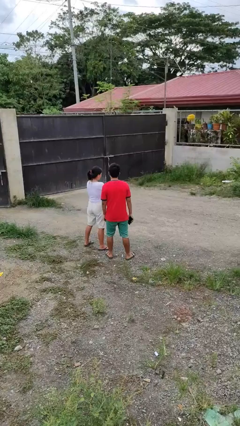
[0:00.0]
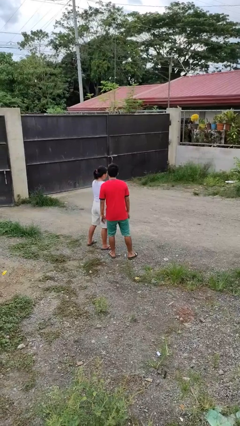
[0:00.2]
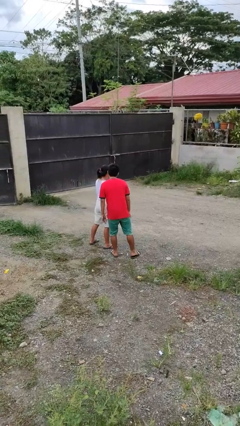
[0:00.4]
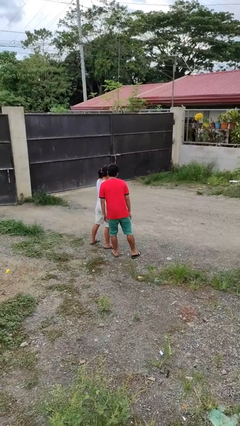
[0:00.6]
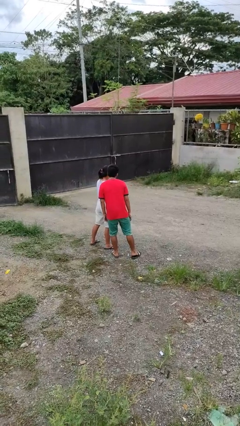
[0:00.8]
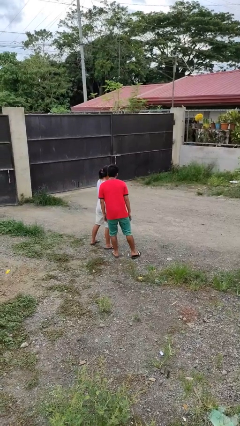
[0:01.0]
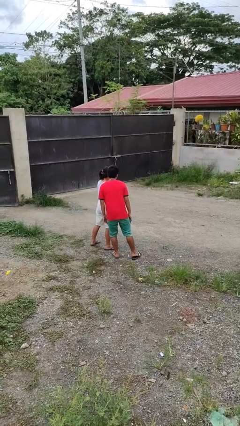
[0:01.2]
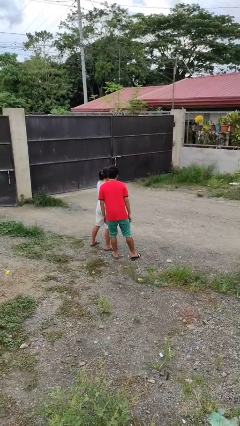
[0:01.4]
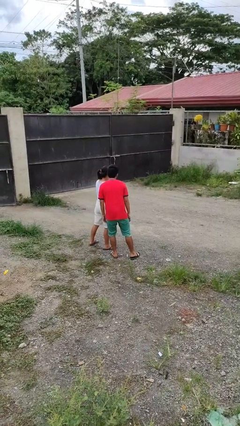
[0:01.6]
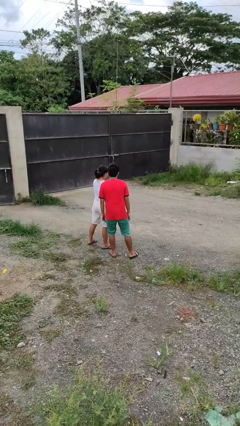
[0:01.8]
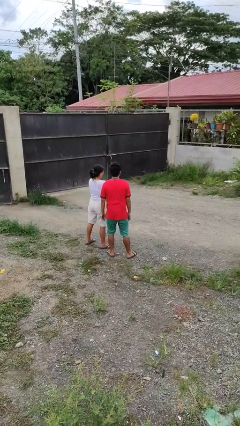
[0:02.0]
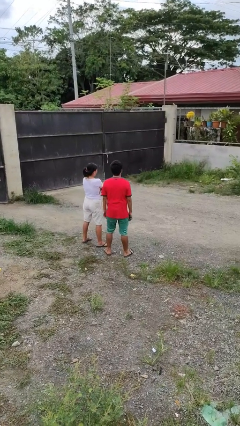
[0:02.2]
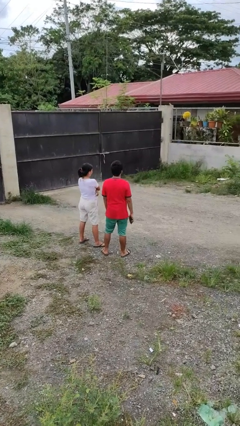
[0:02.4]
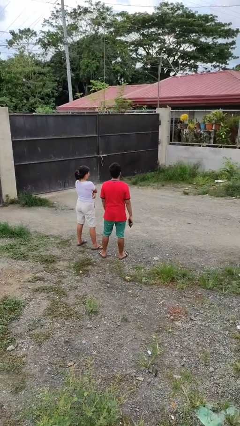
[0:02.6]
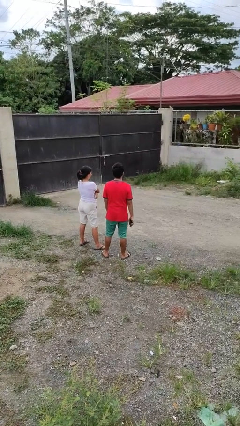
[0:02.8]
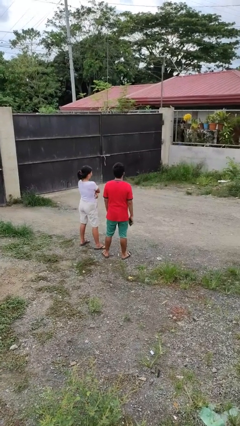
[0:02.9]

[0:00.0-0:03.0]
person kisses cheek of person

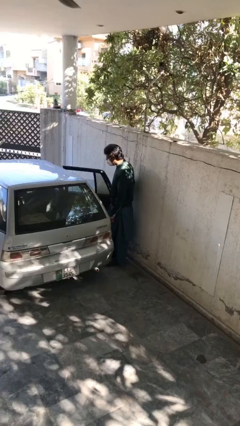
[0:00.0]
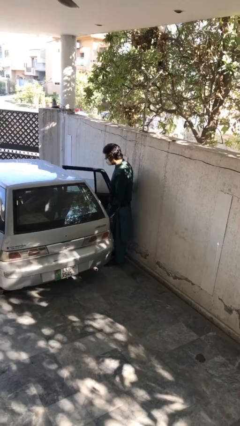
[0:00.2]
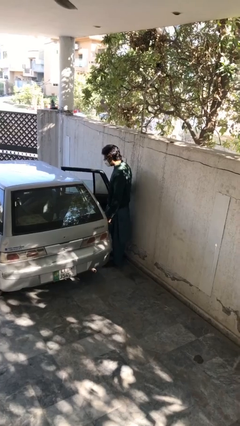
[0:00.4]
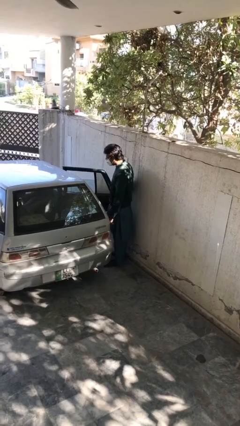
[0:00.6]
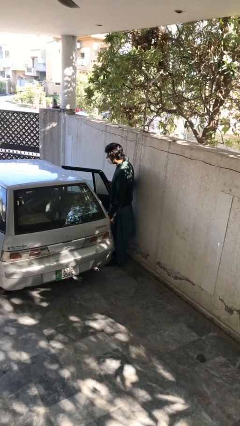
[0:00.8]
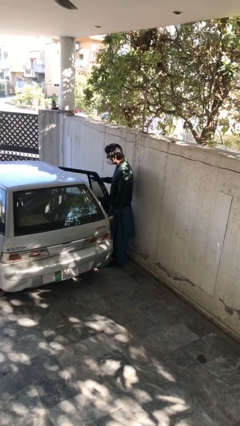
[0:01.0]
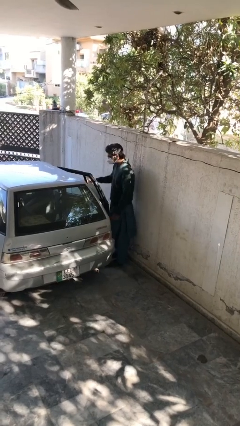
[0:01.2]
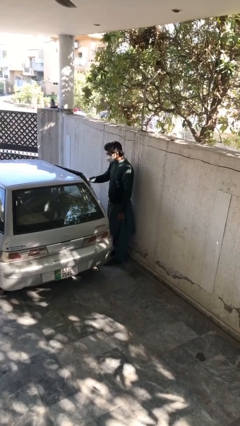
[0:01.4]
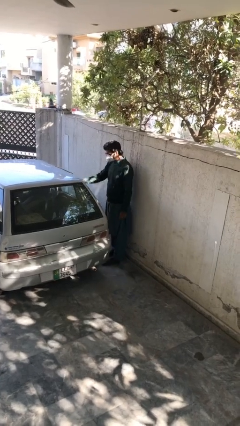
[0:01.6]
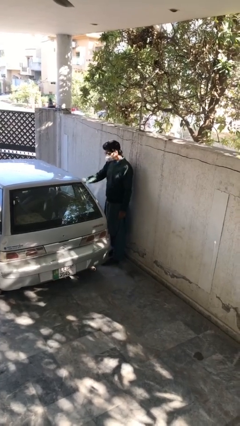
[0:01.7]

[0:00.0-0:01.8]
person closes car door

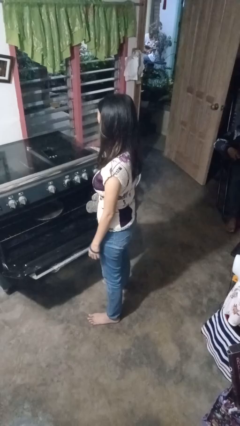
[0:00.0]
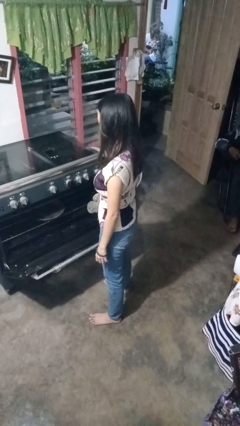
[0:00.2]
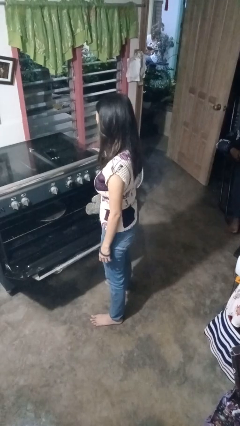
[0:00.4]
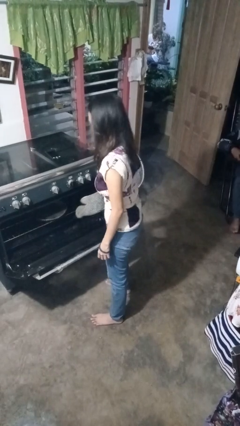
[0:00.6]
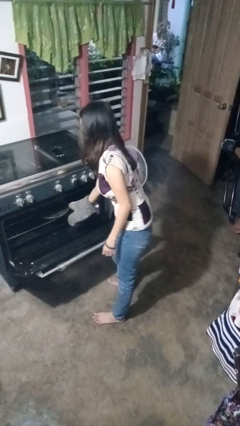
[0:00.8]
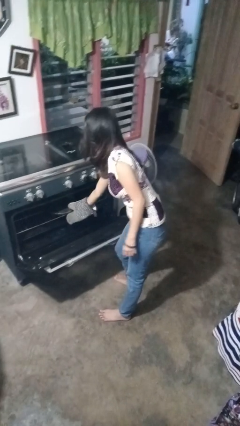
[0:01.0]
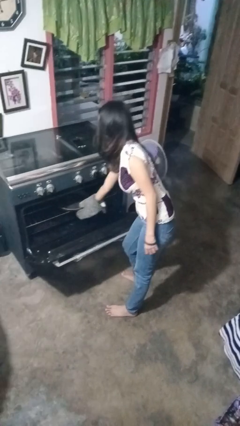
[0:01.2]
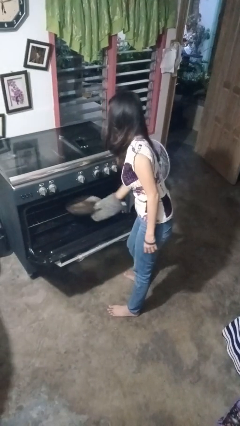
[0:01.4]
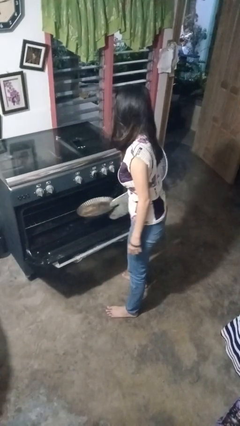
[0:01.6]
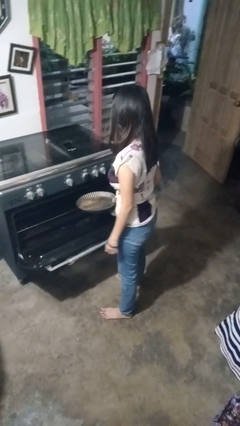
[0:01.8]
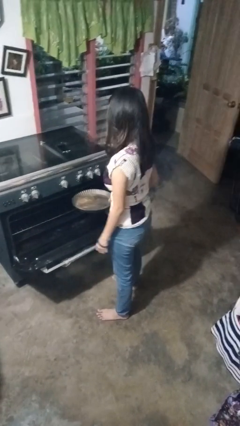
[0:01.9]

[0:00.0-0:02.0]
person takes object from oven

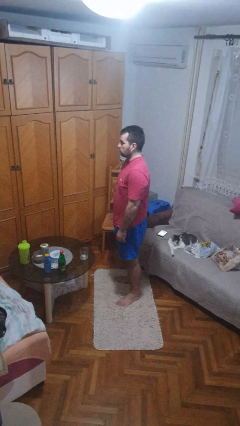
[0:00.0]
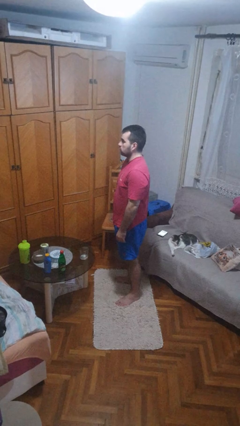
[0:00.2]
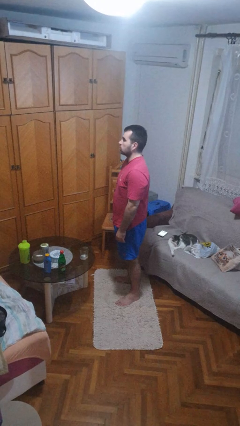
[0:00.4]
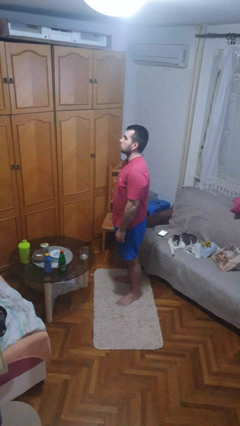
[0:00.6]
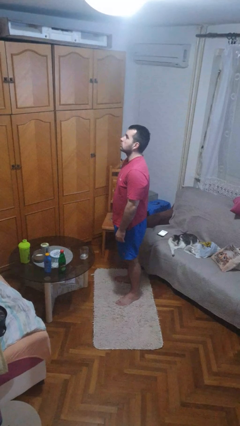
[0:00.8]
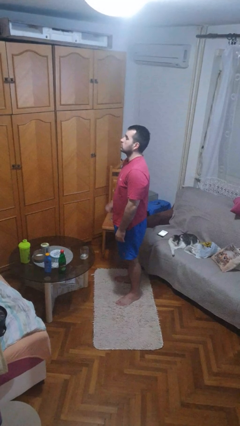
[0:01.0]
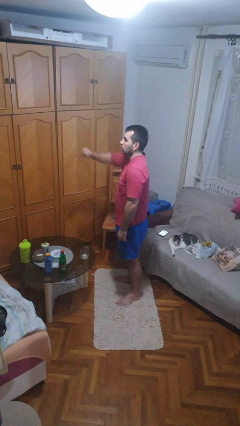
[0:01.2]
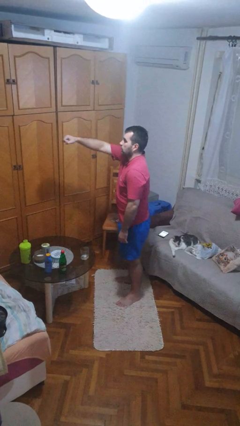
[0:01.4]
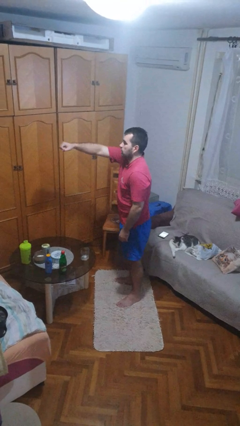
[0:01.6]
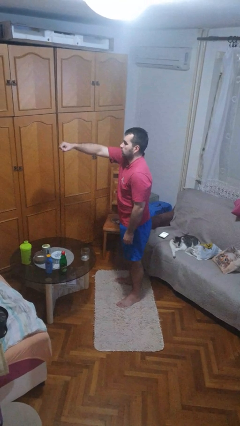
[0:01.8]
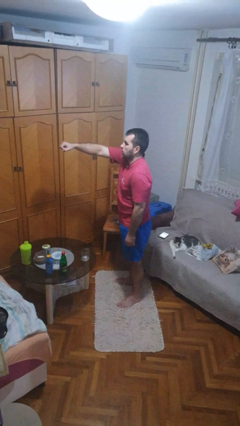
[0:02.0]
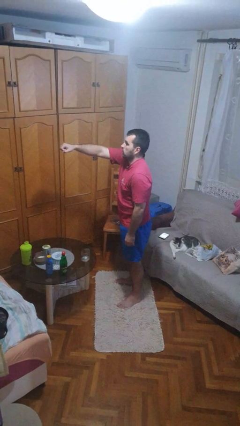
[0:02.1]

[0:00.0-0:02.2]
person punches

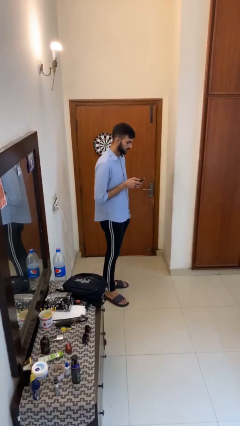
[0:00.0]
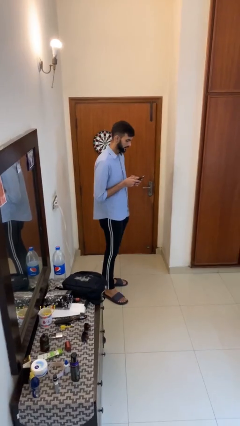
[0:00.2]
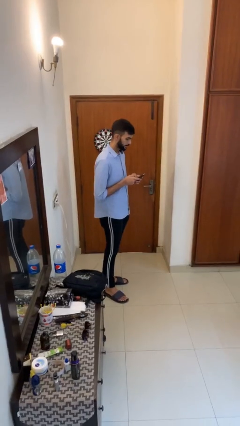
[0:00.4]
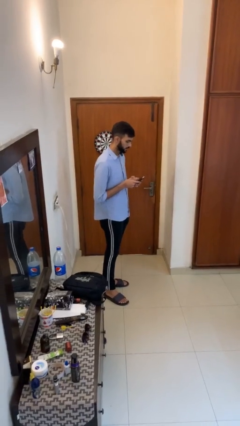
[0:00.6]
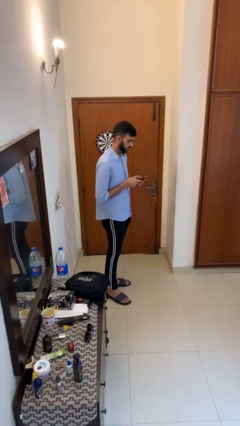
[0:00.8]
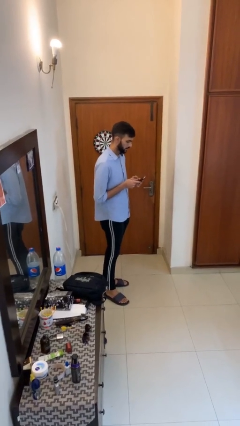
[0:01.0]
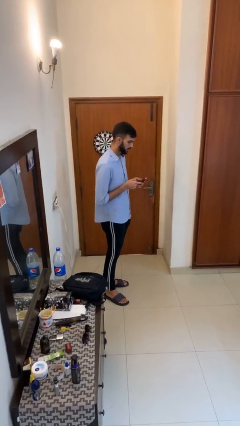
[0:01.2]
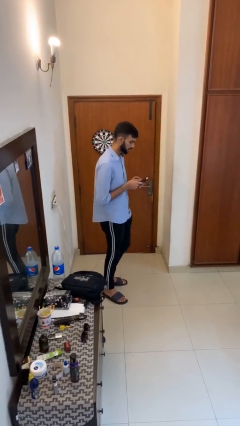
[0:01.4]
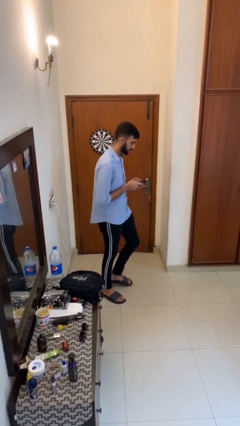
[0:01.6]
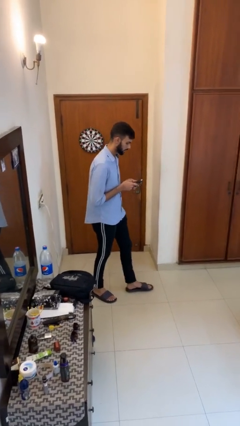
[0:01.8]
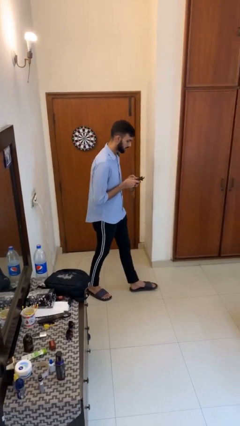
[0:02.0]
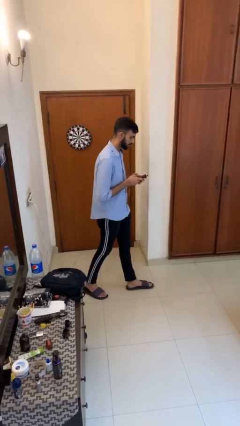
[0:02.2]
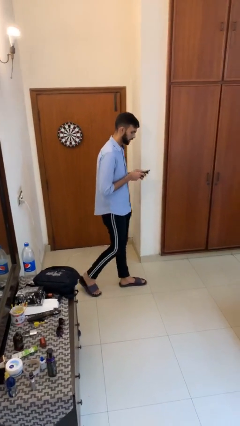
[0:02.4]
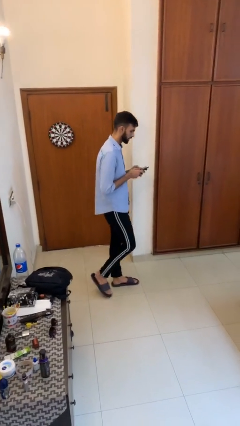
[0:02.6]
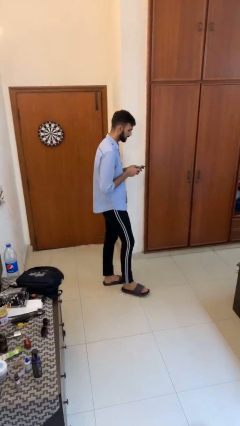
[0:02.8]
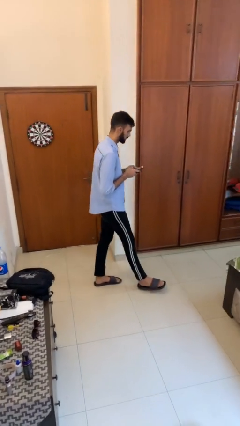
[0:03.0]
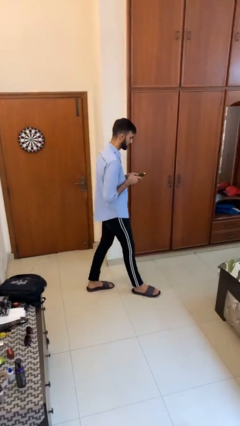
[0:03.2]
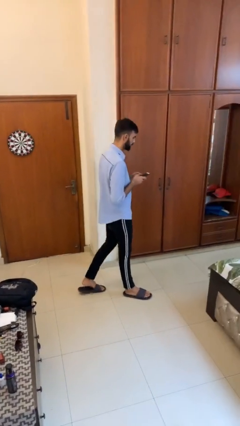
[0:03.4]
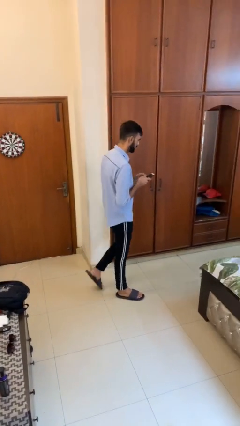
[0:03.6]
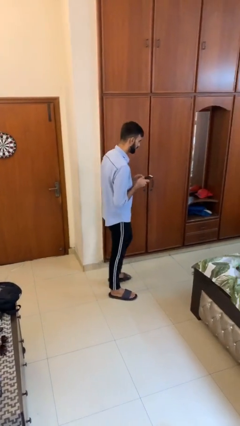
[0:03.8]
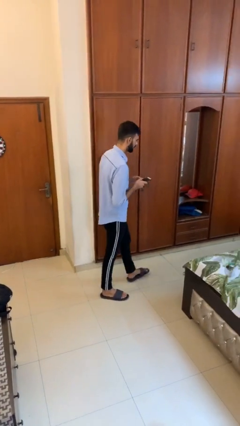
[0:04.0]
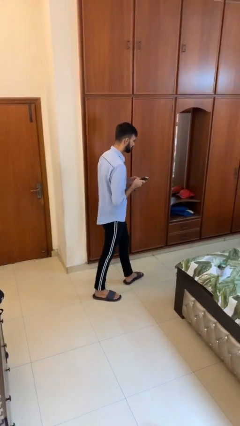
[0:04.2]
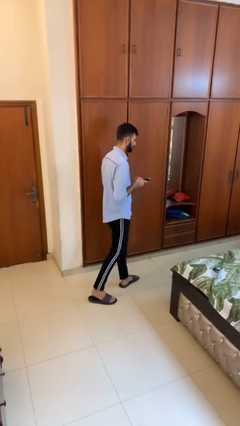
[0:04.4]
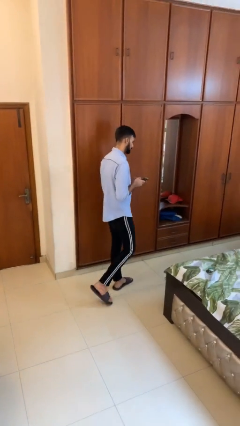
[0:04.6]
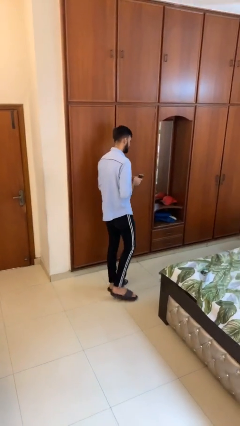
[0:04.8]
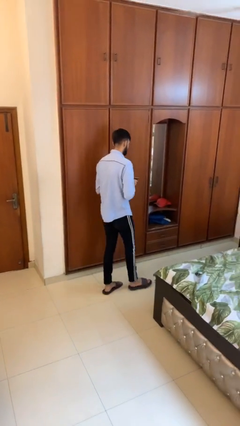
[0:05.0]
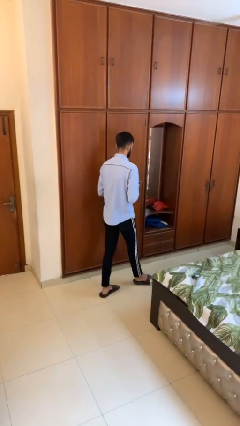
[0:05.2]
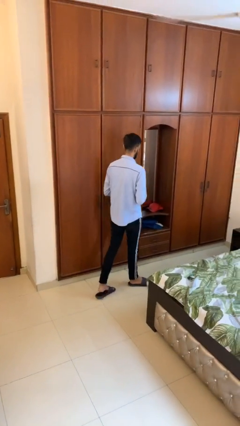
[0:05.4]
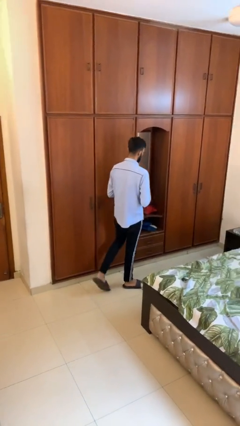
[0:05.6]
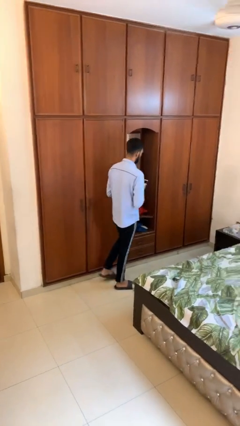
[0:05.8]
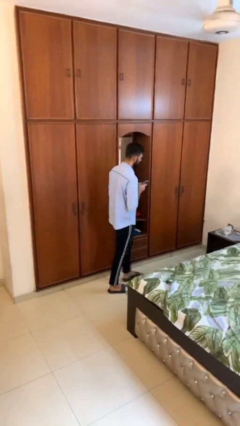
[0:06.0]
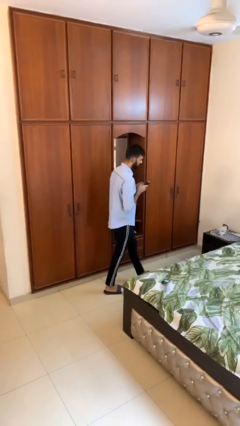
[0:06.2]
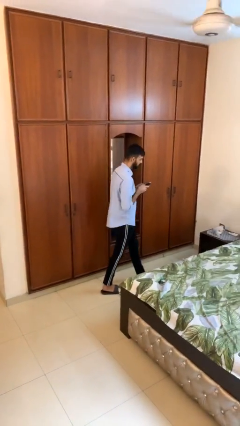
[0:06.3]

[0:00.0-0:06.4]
person texts on phone

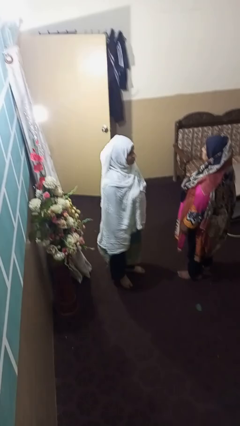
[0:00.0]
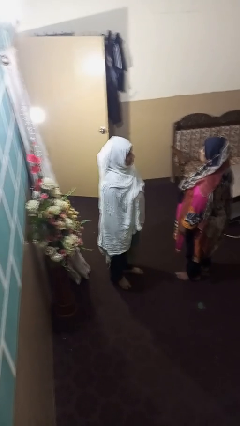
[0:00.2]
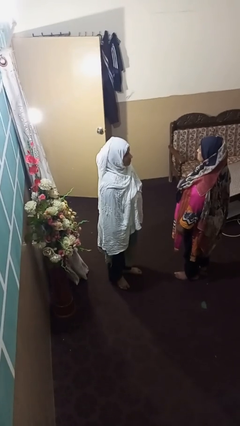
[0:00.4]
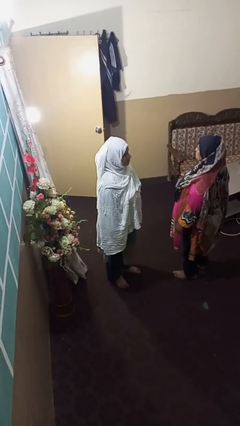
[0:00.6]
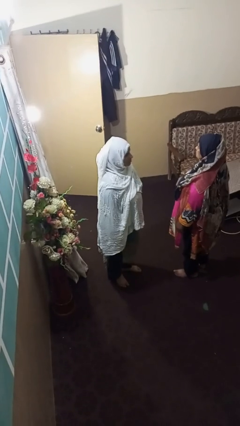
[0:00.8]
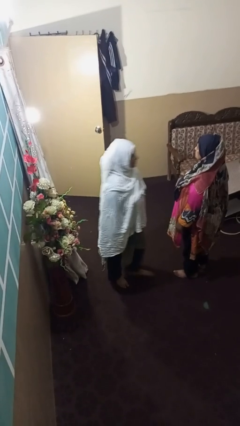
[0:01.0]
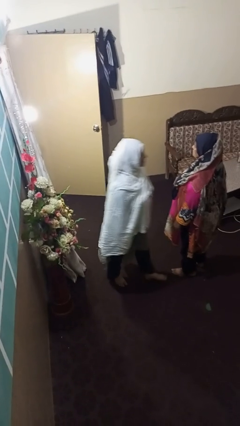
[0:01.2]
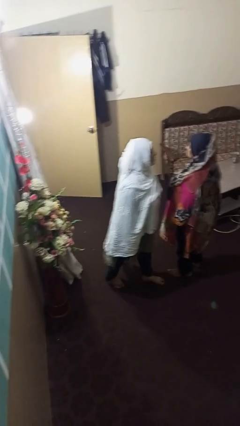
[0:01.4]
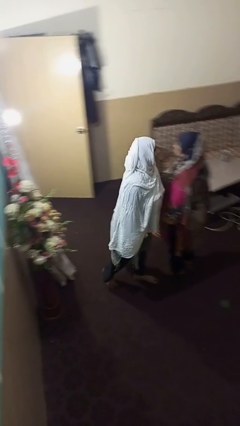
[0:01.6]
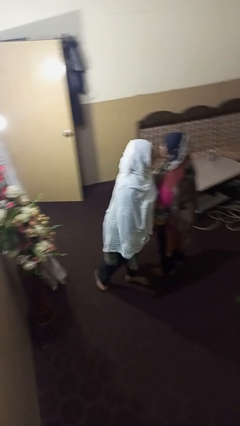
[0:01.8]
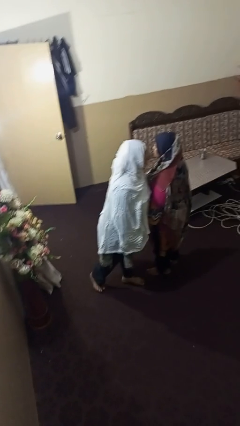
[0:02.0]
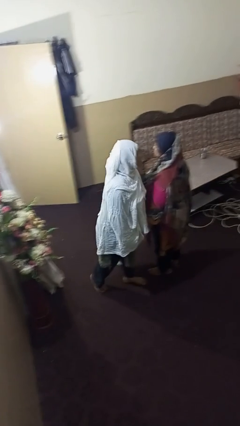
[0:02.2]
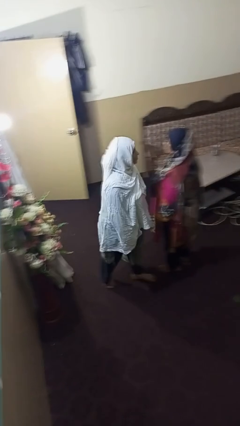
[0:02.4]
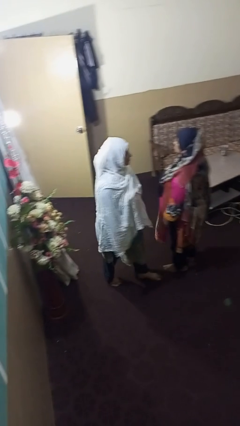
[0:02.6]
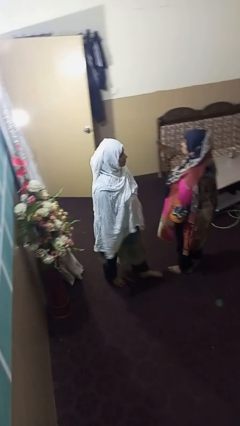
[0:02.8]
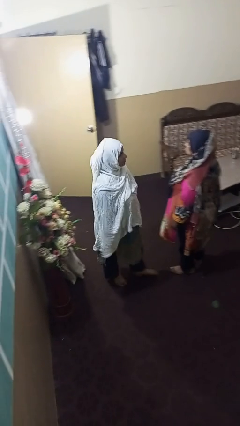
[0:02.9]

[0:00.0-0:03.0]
person laughs with person
